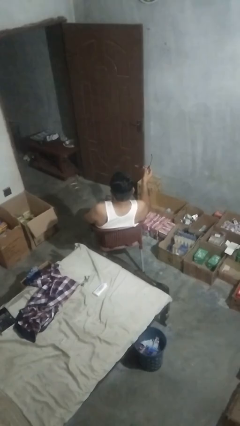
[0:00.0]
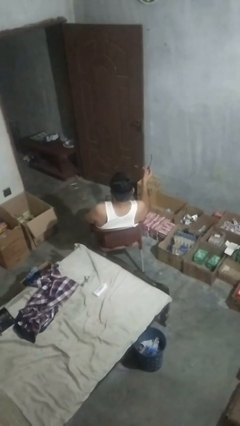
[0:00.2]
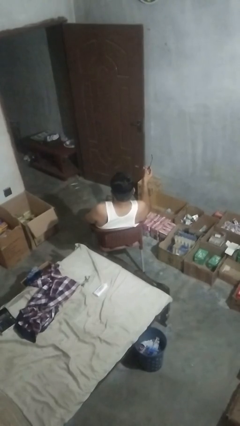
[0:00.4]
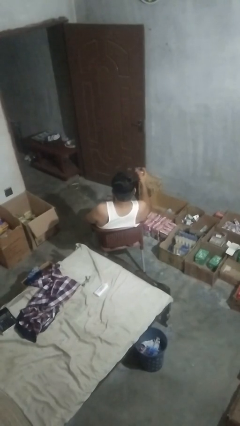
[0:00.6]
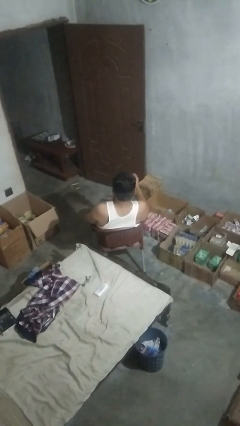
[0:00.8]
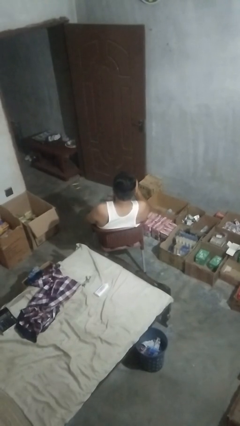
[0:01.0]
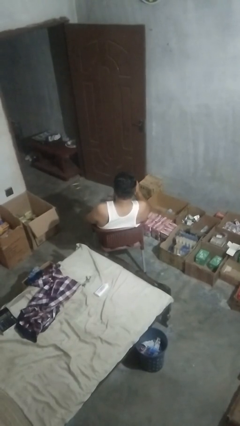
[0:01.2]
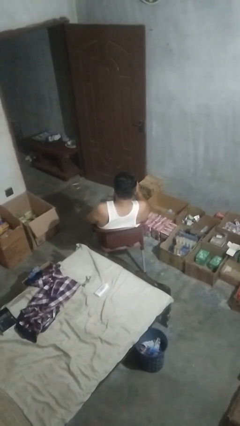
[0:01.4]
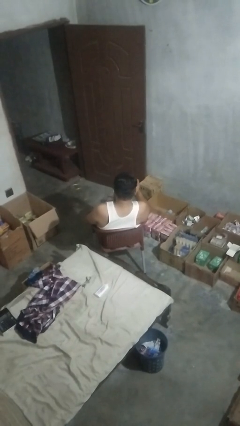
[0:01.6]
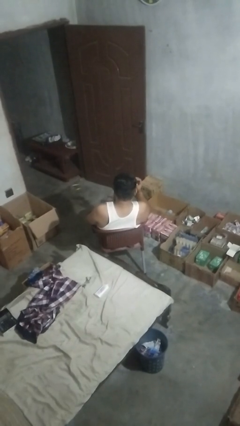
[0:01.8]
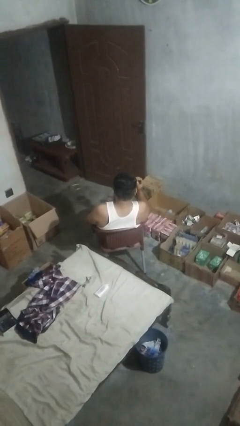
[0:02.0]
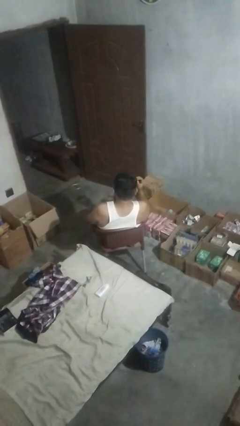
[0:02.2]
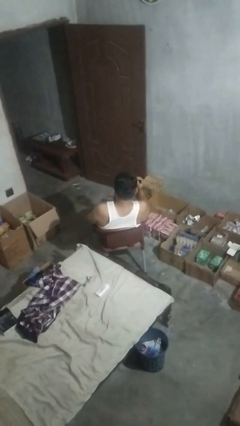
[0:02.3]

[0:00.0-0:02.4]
person puts on sunglasses

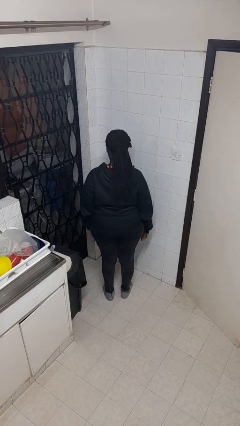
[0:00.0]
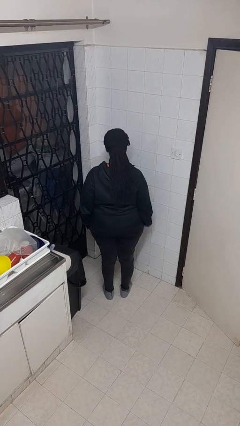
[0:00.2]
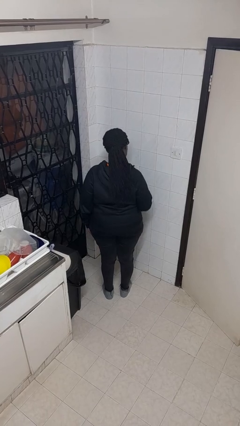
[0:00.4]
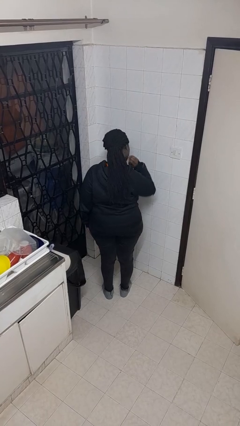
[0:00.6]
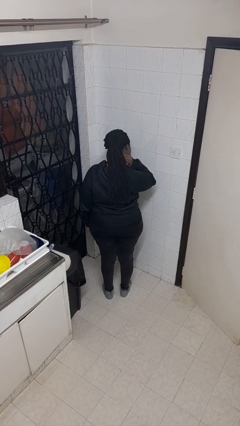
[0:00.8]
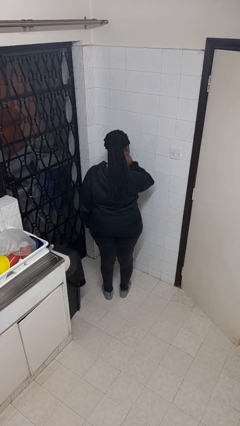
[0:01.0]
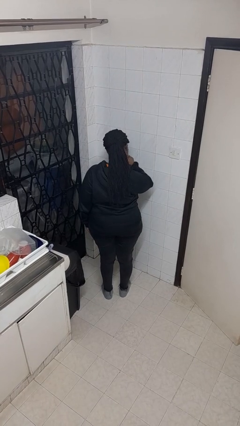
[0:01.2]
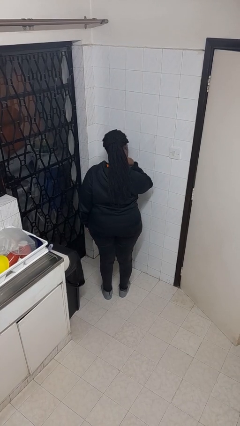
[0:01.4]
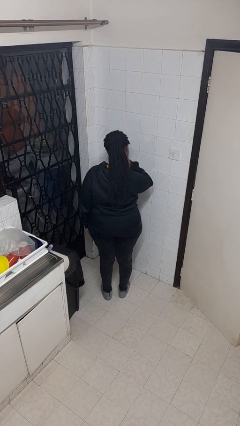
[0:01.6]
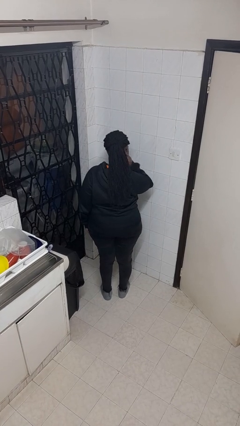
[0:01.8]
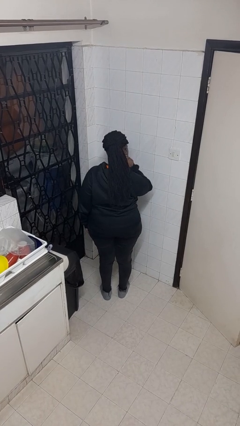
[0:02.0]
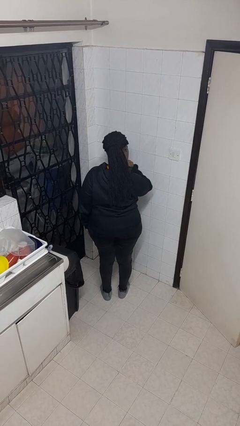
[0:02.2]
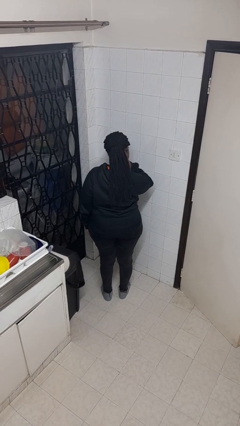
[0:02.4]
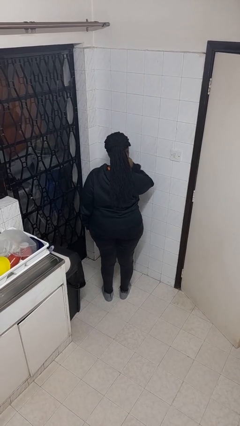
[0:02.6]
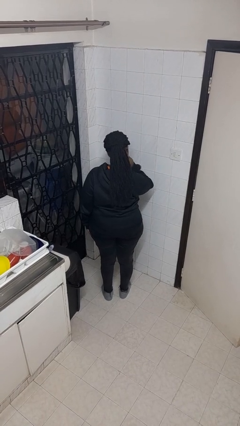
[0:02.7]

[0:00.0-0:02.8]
person rubs neck

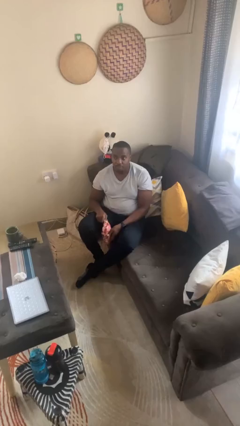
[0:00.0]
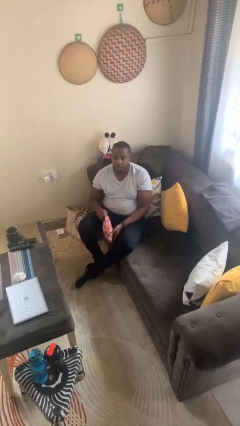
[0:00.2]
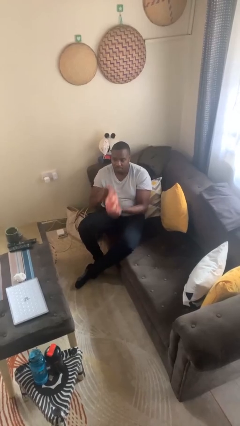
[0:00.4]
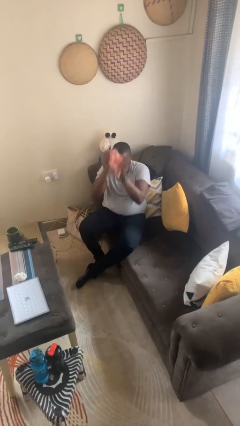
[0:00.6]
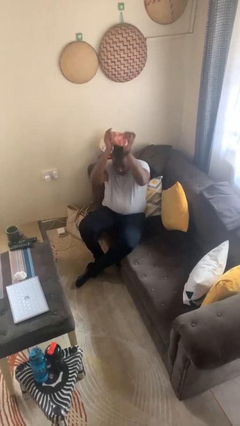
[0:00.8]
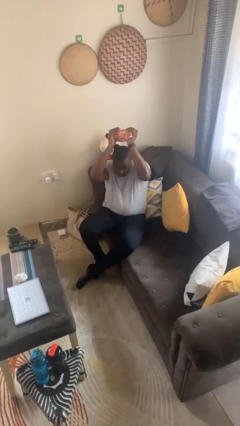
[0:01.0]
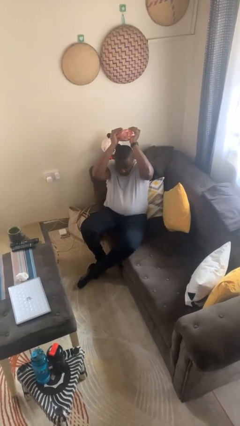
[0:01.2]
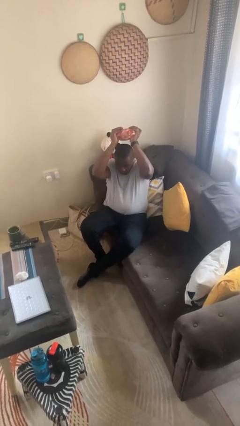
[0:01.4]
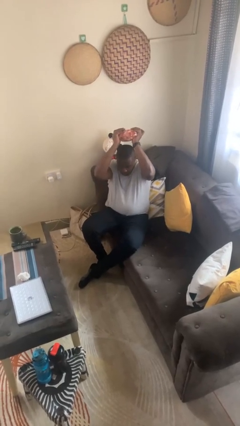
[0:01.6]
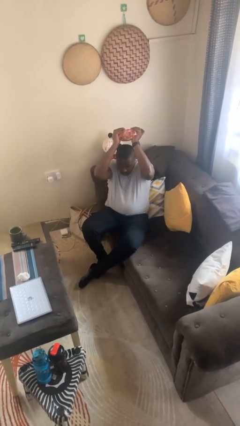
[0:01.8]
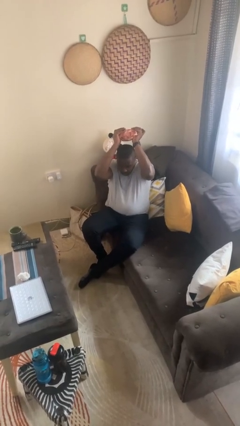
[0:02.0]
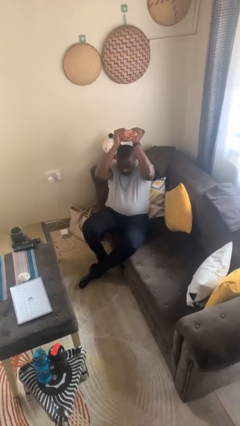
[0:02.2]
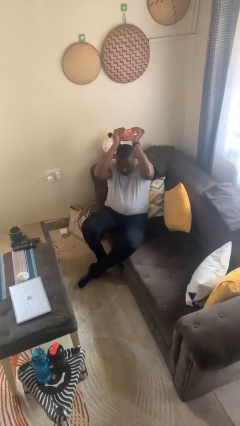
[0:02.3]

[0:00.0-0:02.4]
person holds object above head

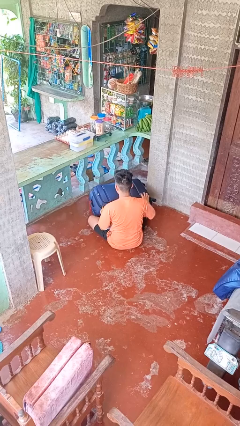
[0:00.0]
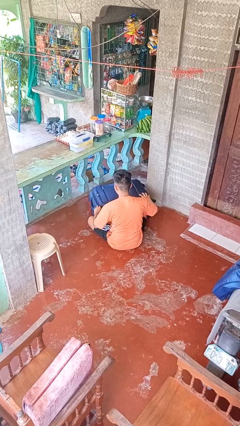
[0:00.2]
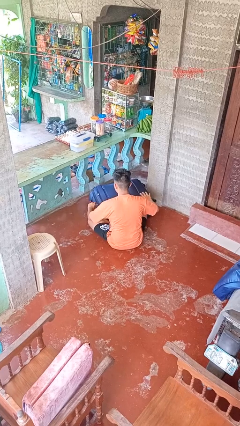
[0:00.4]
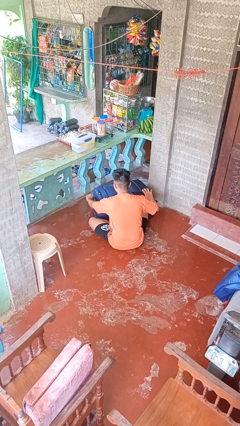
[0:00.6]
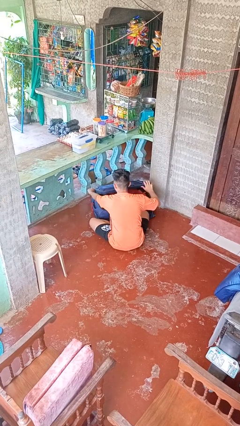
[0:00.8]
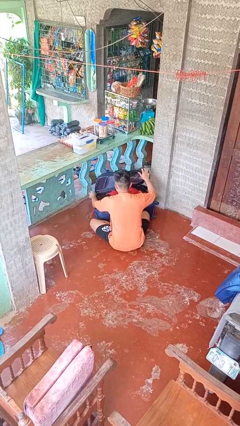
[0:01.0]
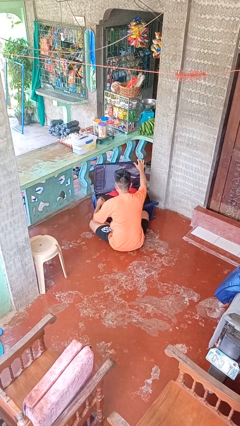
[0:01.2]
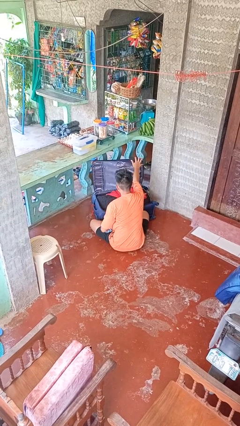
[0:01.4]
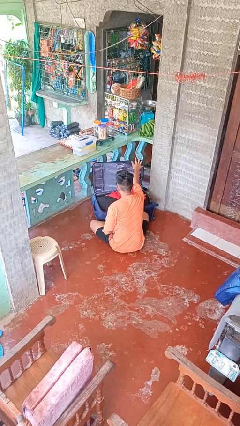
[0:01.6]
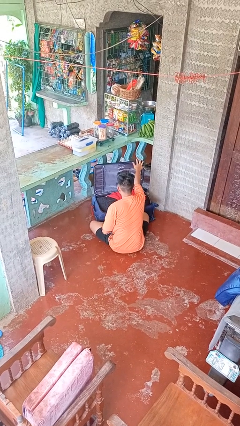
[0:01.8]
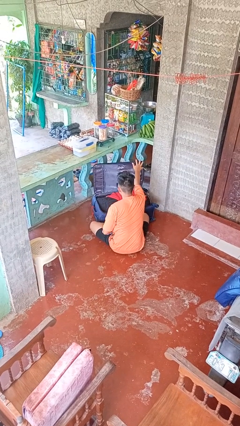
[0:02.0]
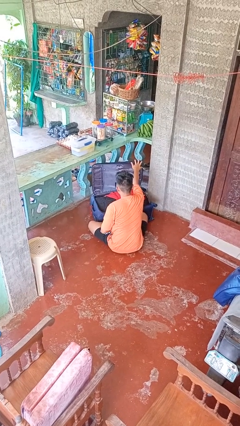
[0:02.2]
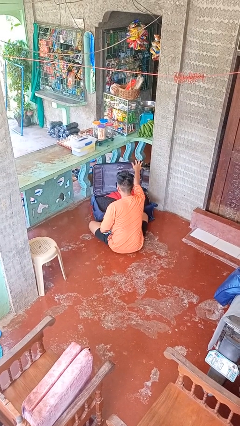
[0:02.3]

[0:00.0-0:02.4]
person opens suitcase

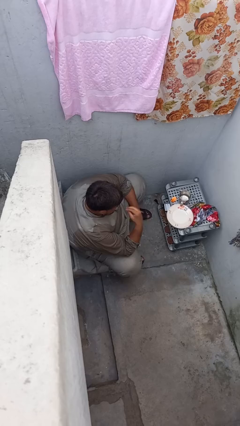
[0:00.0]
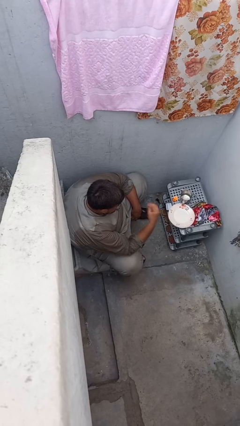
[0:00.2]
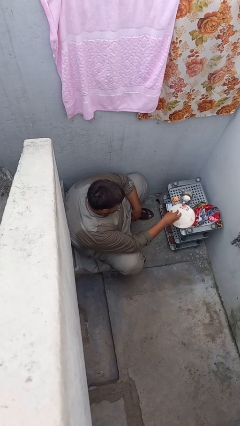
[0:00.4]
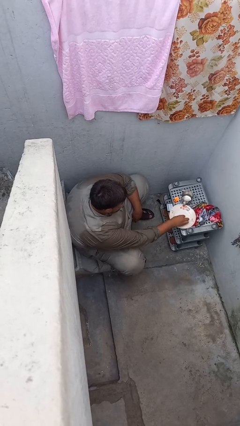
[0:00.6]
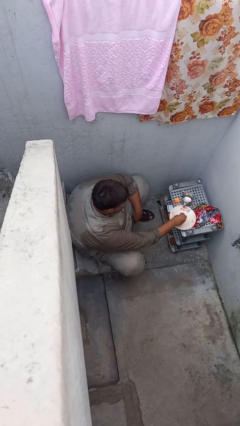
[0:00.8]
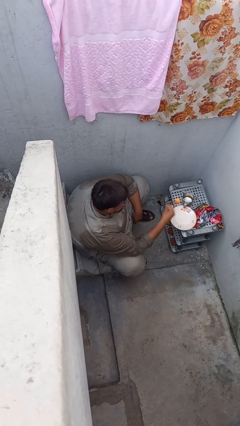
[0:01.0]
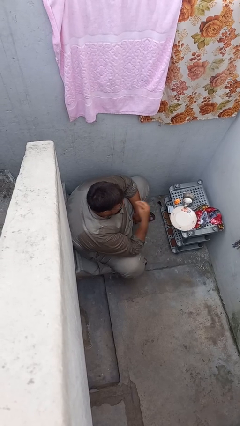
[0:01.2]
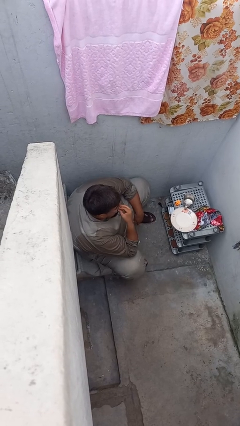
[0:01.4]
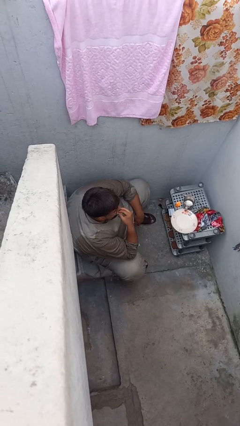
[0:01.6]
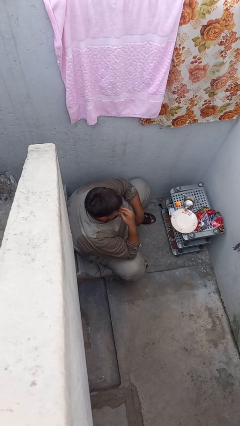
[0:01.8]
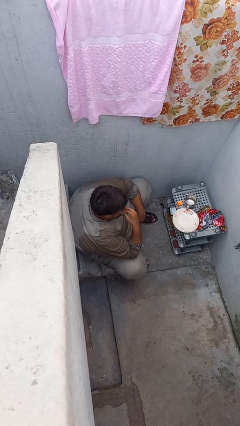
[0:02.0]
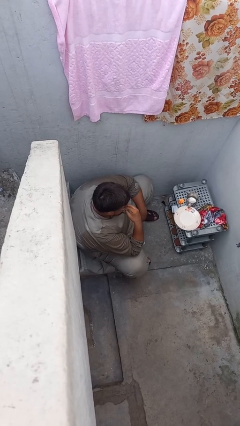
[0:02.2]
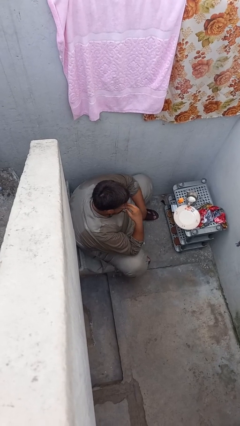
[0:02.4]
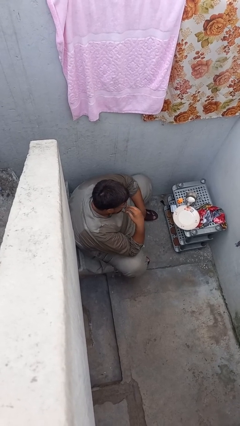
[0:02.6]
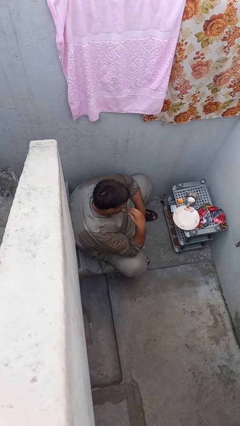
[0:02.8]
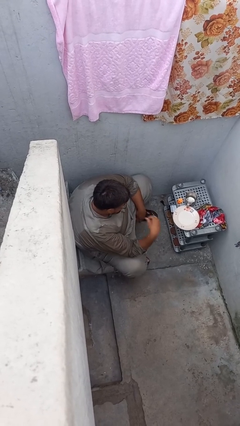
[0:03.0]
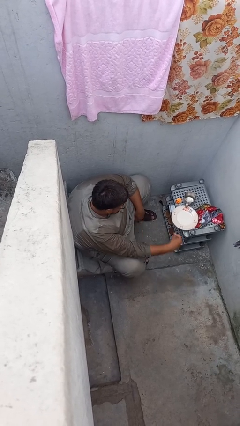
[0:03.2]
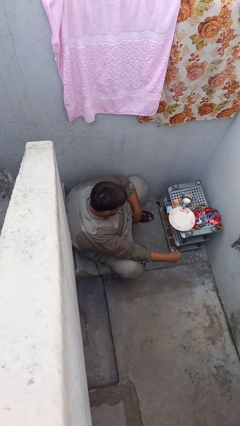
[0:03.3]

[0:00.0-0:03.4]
person eats with hands

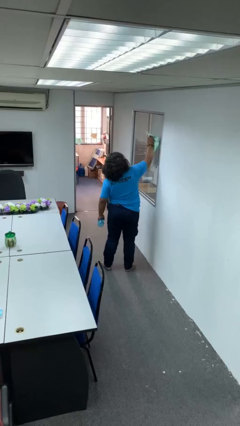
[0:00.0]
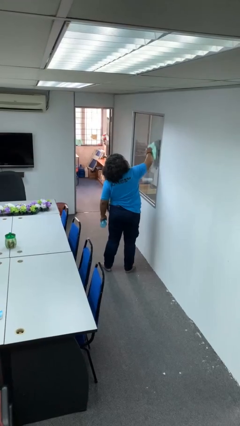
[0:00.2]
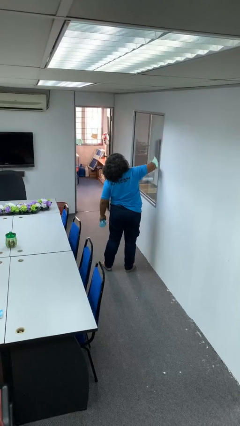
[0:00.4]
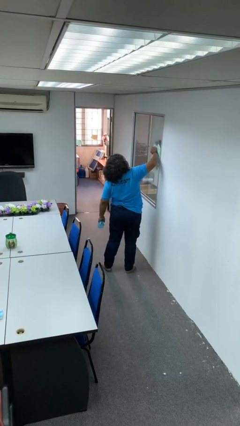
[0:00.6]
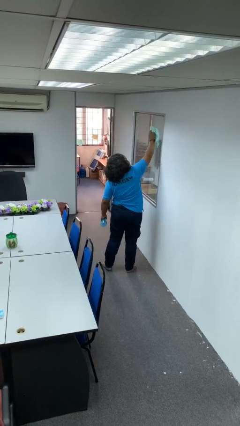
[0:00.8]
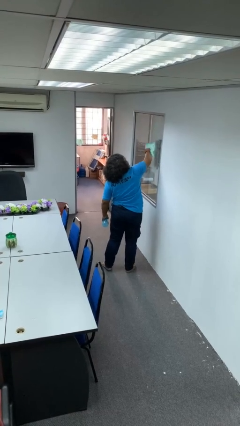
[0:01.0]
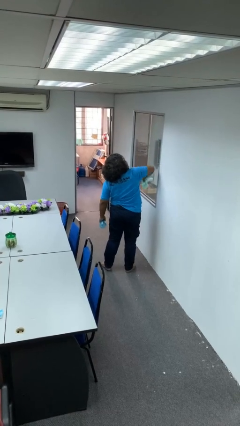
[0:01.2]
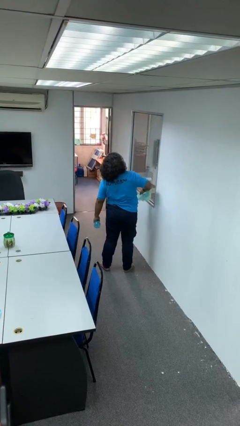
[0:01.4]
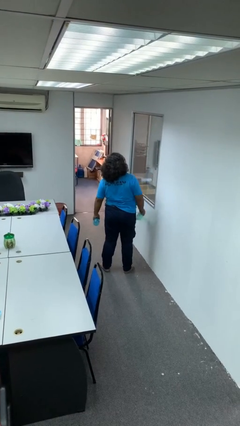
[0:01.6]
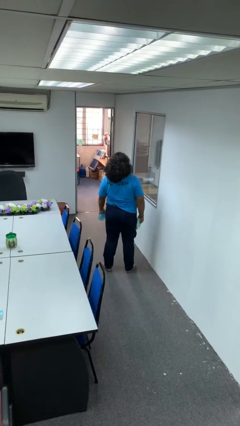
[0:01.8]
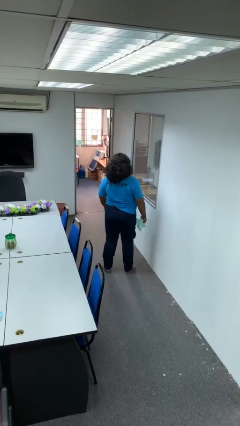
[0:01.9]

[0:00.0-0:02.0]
person washes window

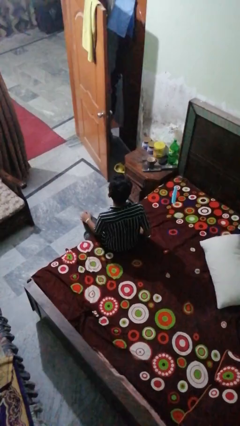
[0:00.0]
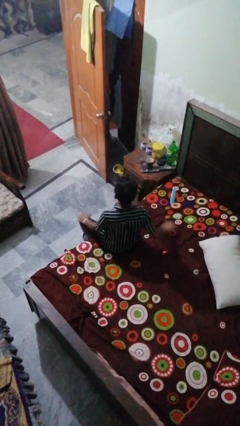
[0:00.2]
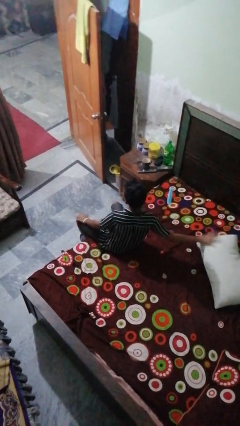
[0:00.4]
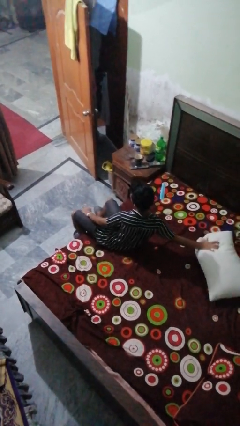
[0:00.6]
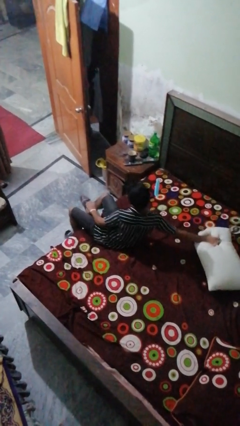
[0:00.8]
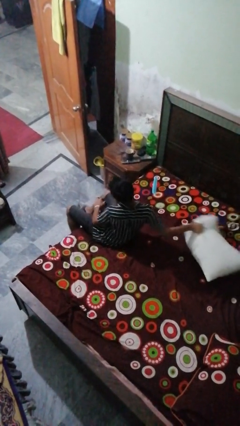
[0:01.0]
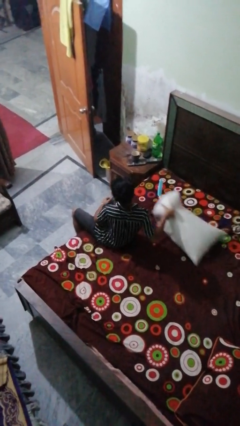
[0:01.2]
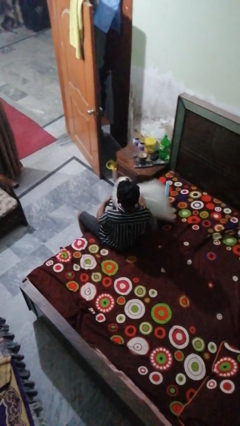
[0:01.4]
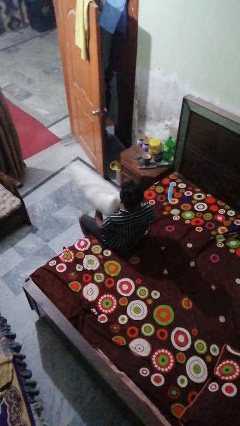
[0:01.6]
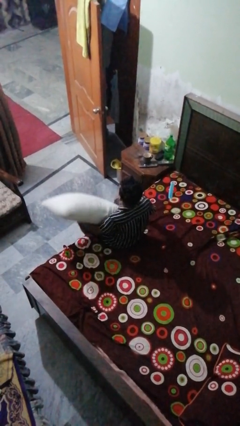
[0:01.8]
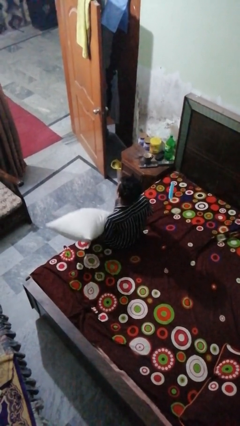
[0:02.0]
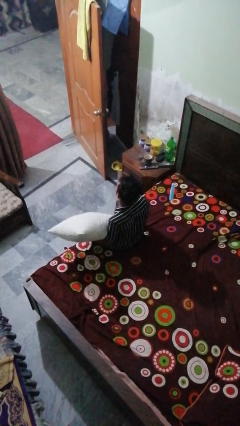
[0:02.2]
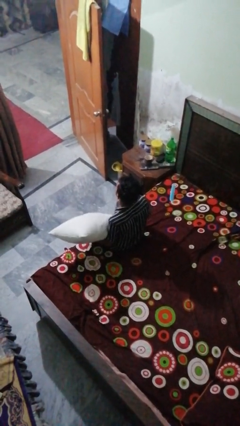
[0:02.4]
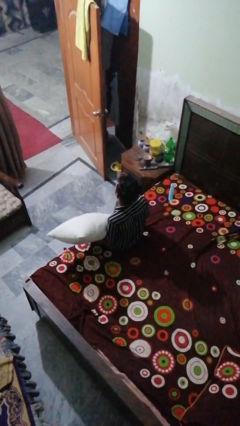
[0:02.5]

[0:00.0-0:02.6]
person picks up object from bed
